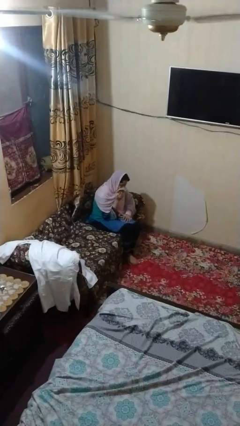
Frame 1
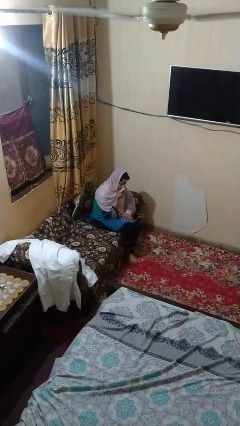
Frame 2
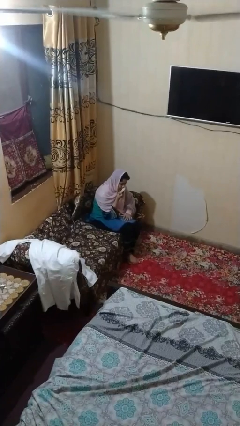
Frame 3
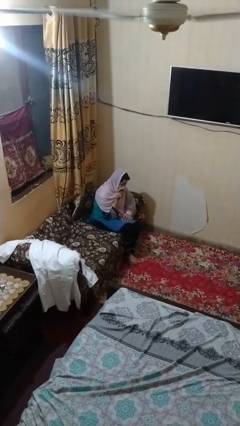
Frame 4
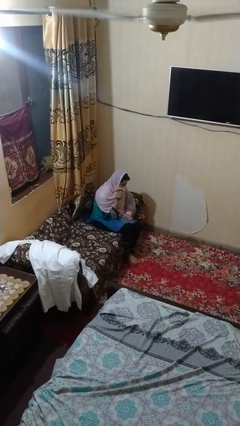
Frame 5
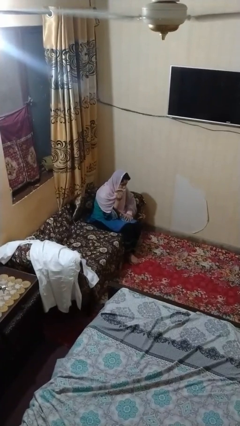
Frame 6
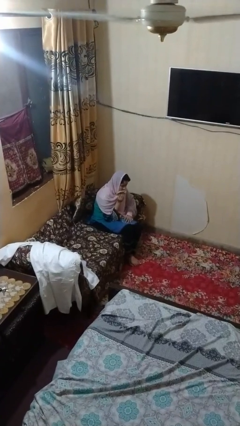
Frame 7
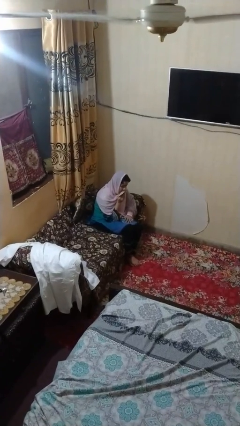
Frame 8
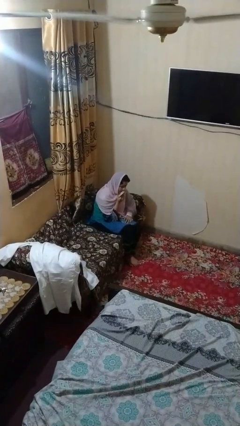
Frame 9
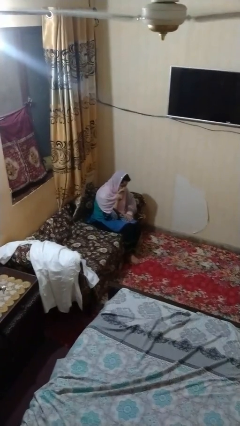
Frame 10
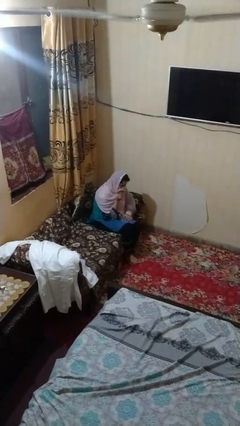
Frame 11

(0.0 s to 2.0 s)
person wipes mouth with napkin

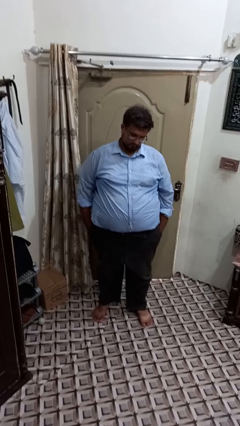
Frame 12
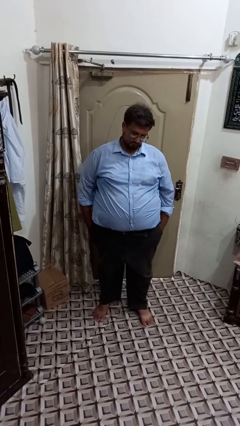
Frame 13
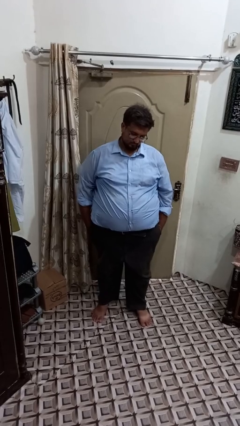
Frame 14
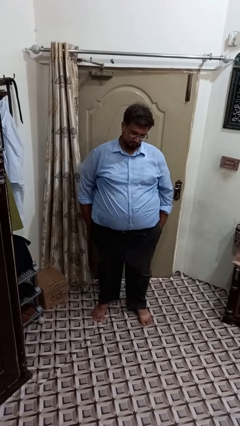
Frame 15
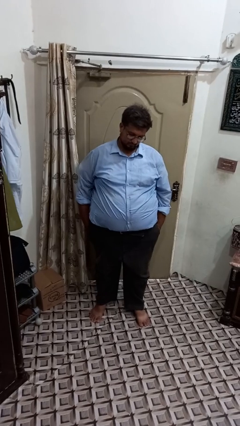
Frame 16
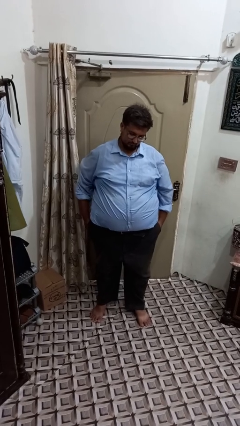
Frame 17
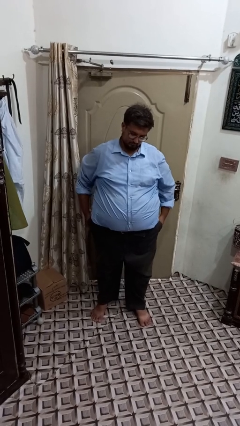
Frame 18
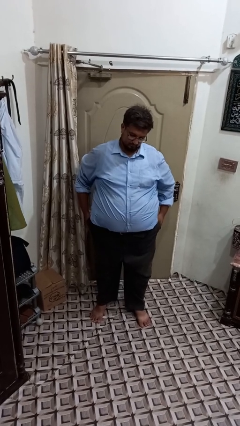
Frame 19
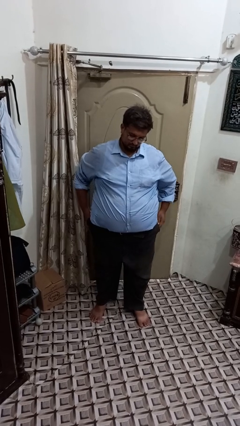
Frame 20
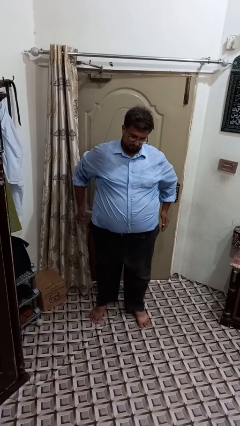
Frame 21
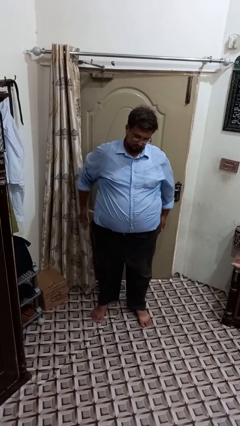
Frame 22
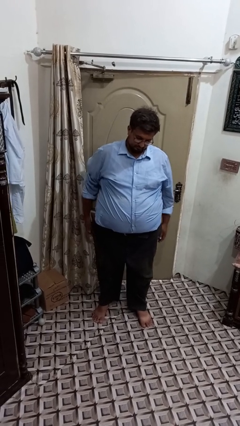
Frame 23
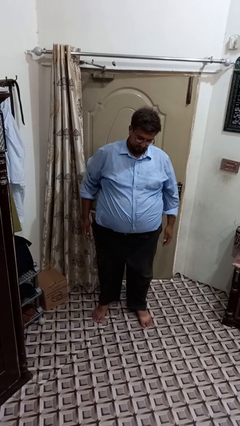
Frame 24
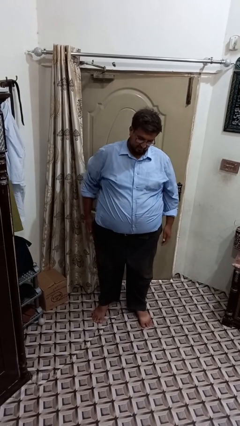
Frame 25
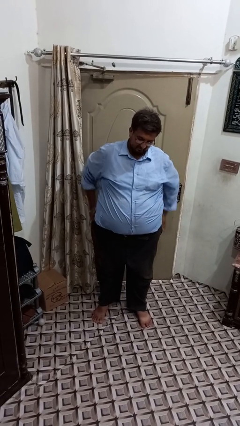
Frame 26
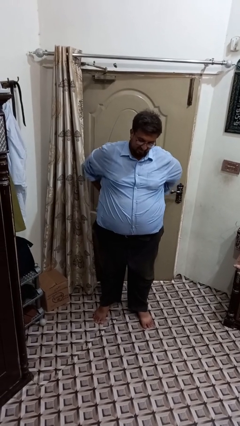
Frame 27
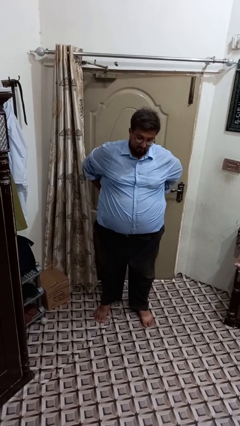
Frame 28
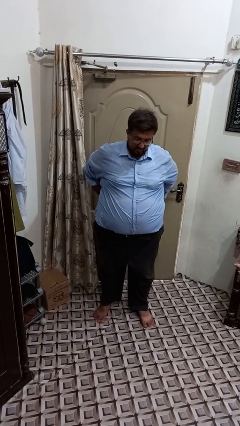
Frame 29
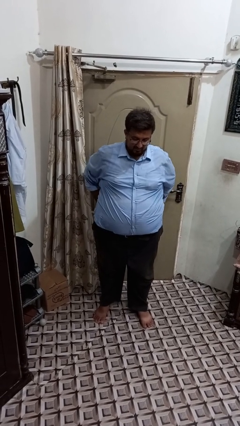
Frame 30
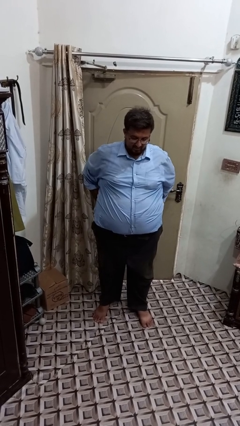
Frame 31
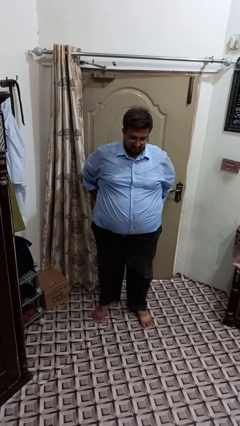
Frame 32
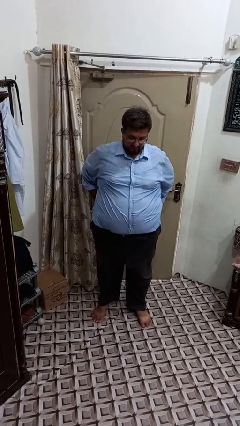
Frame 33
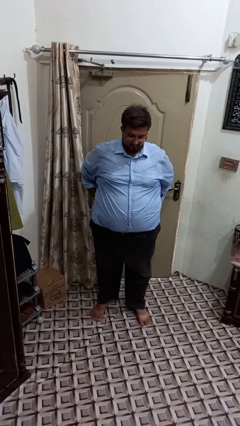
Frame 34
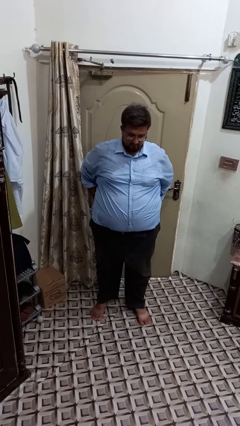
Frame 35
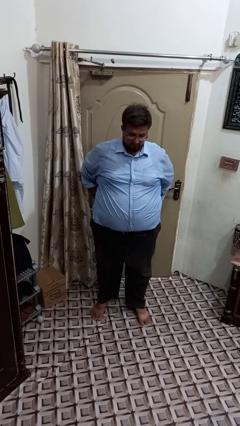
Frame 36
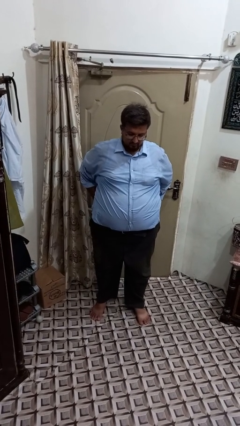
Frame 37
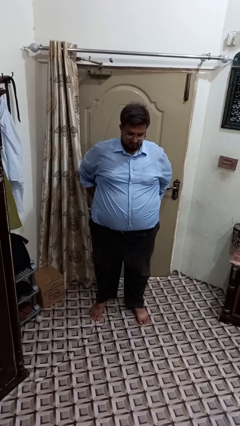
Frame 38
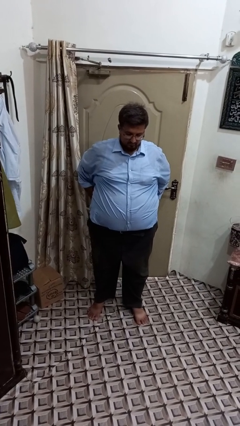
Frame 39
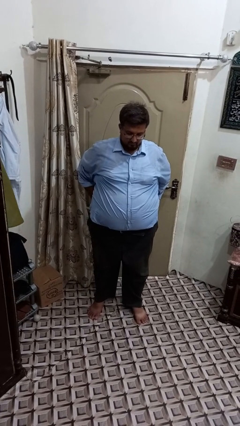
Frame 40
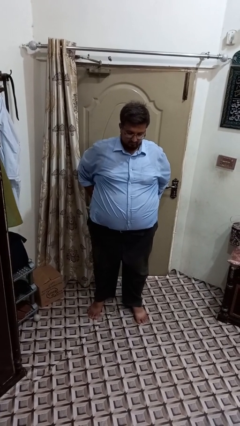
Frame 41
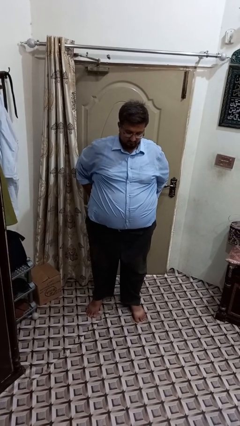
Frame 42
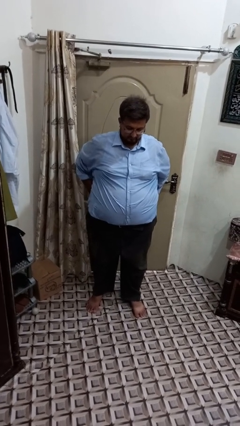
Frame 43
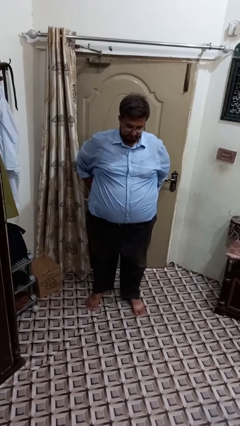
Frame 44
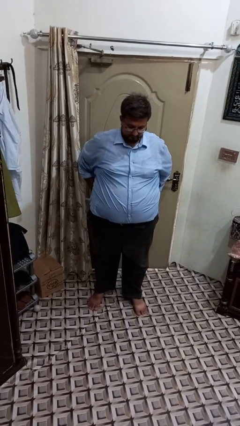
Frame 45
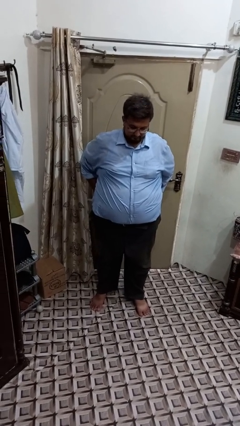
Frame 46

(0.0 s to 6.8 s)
person puts hands in back pockets

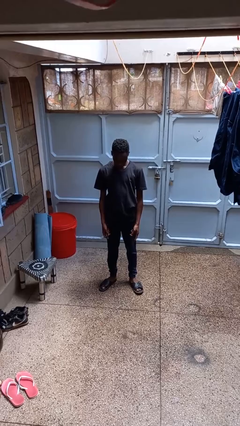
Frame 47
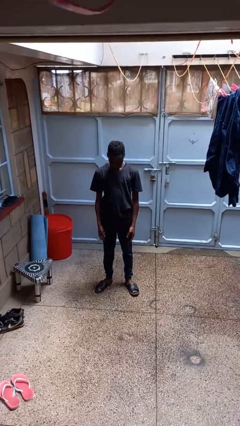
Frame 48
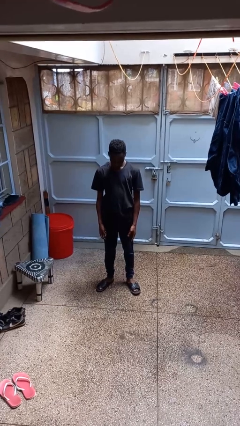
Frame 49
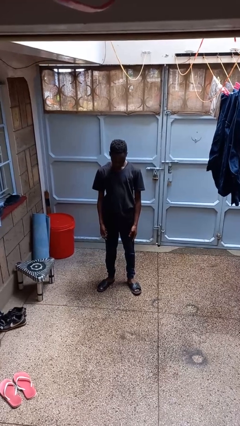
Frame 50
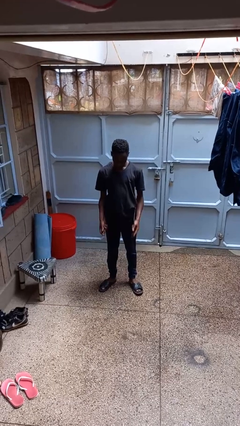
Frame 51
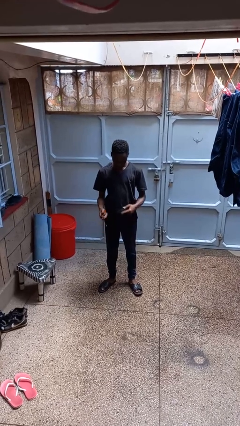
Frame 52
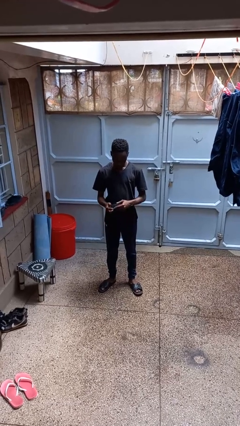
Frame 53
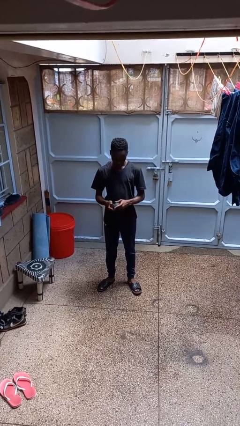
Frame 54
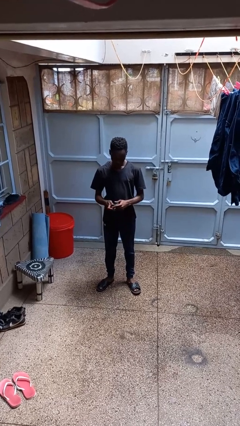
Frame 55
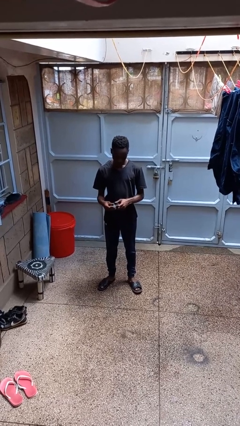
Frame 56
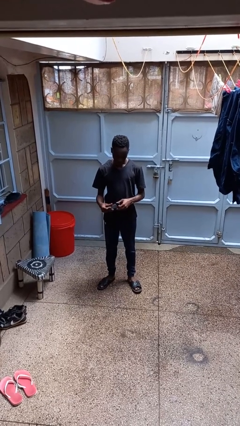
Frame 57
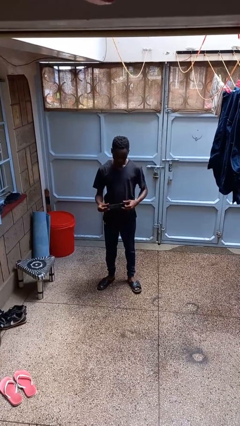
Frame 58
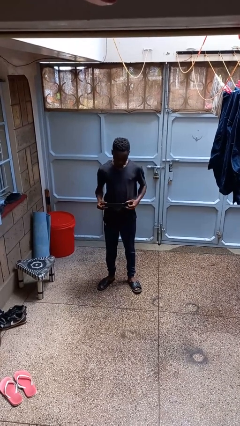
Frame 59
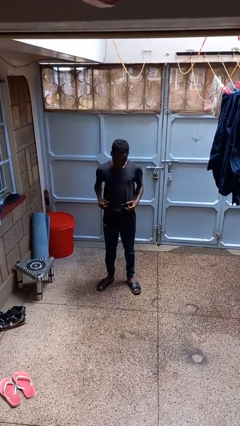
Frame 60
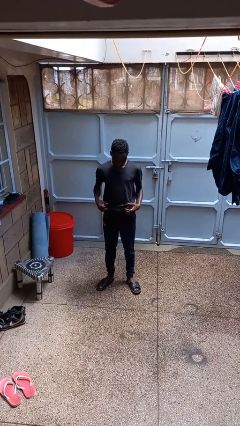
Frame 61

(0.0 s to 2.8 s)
person puts on belt

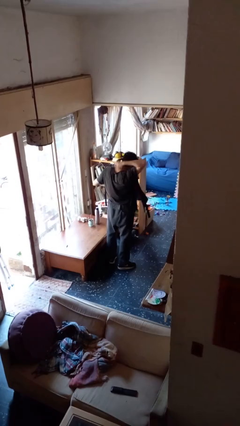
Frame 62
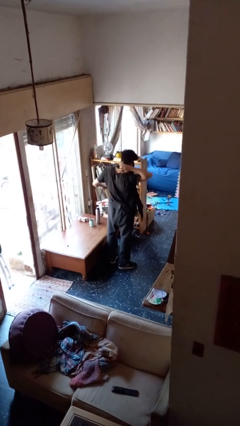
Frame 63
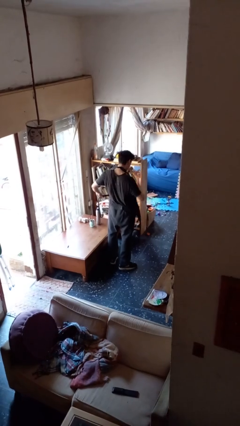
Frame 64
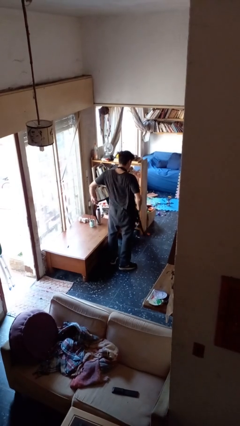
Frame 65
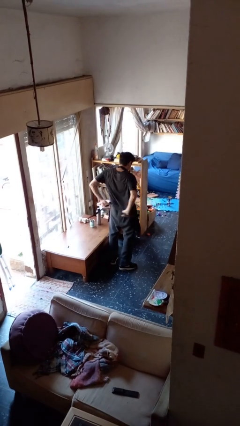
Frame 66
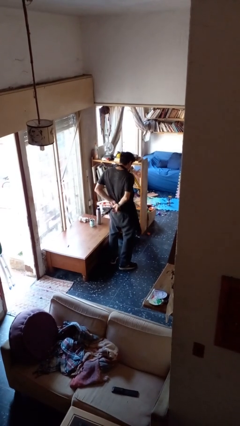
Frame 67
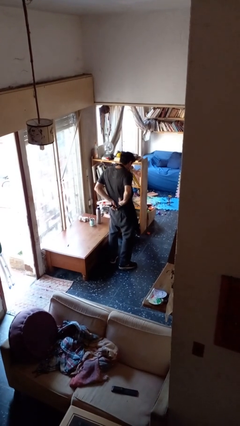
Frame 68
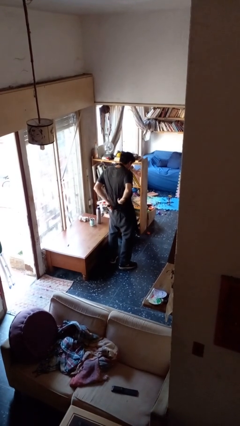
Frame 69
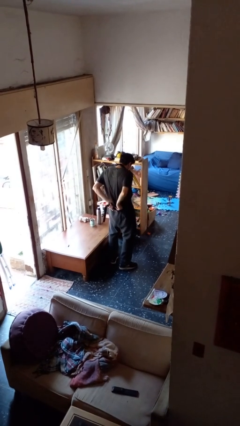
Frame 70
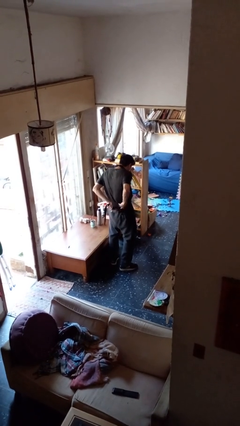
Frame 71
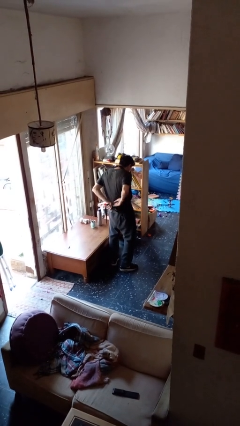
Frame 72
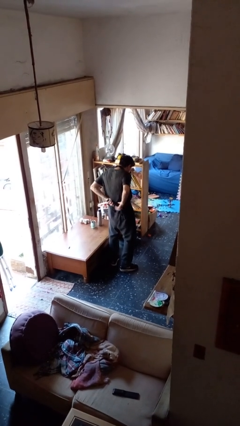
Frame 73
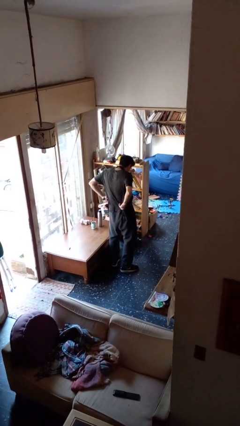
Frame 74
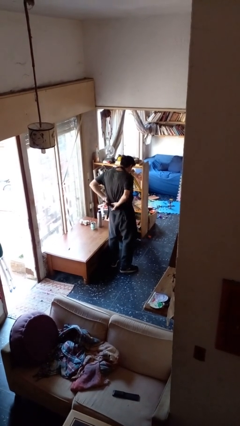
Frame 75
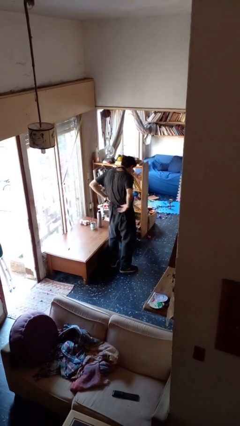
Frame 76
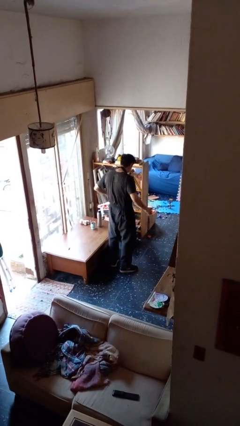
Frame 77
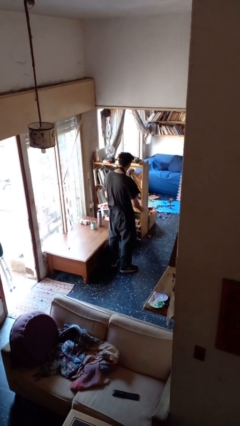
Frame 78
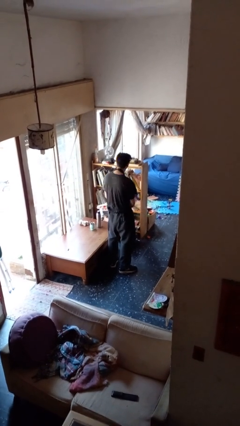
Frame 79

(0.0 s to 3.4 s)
person puts on apron

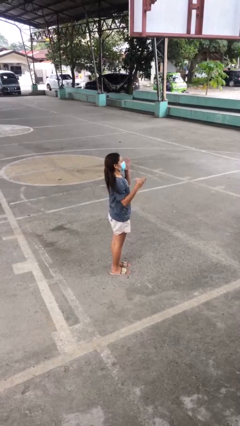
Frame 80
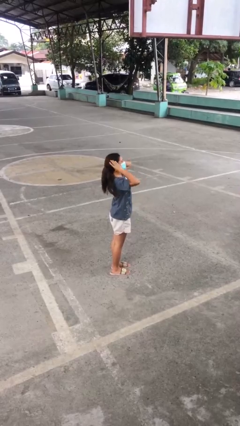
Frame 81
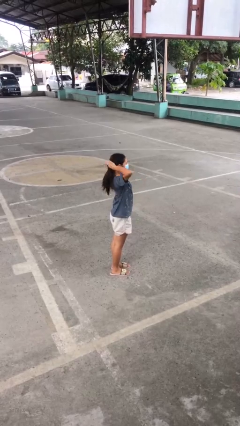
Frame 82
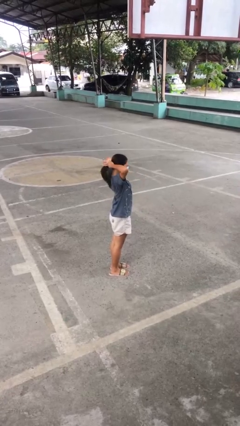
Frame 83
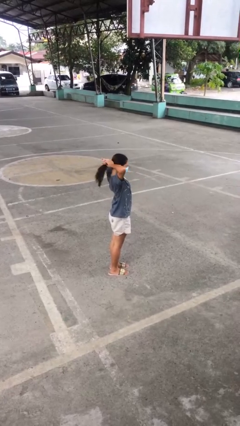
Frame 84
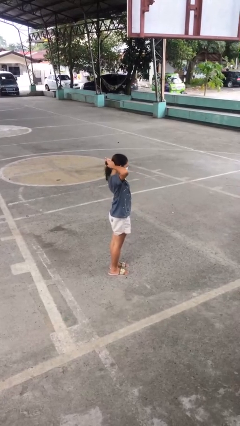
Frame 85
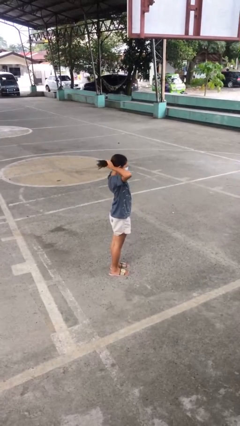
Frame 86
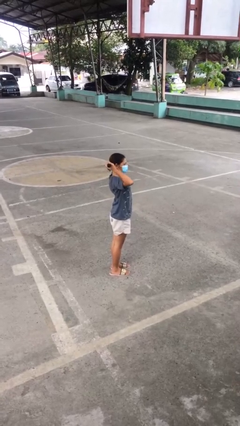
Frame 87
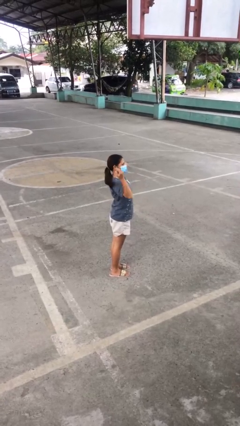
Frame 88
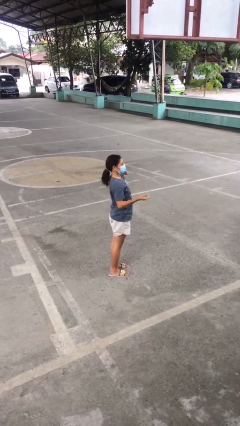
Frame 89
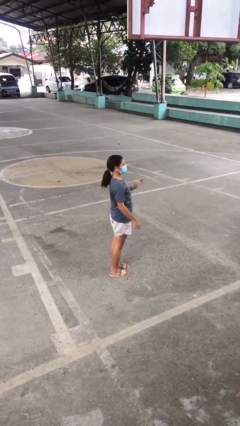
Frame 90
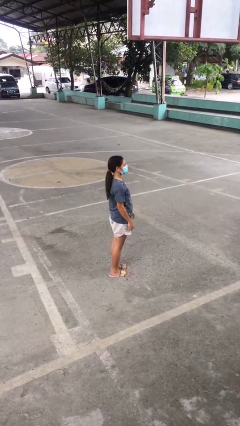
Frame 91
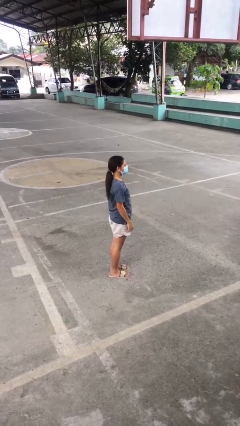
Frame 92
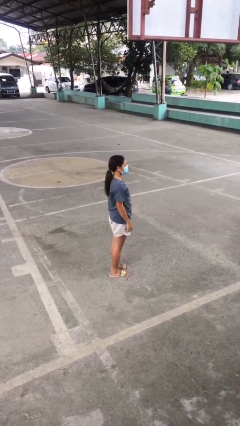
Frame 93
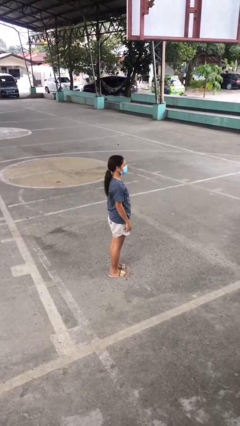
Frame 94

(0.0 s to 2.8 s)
person puts hair in ponytail
